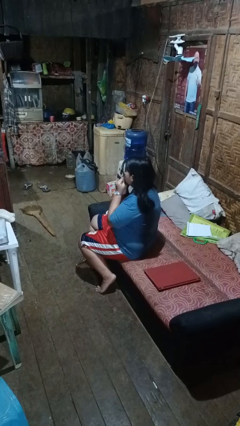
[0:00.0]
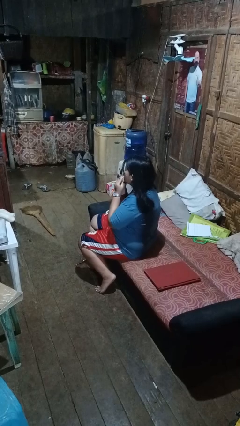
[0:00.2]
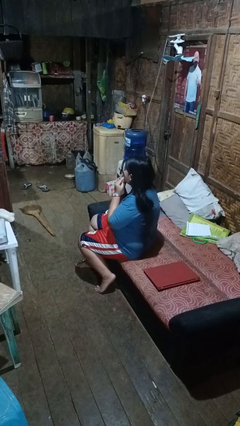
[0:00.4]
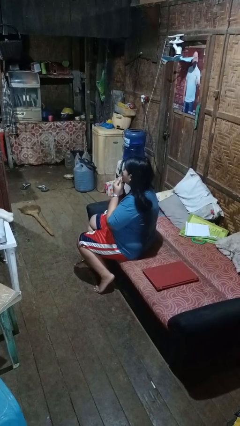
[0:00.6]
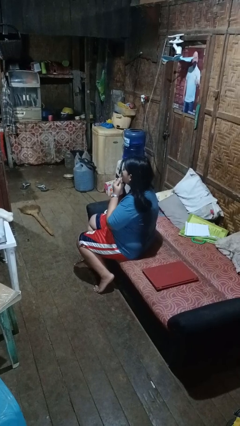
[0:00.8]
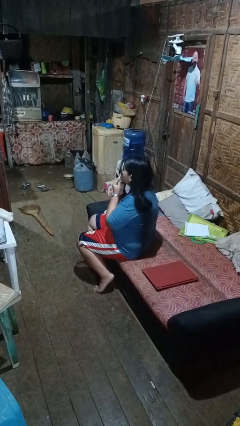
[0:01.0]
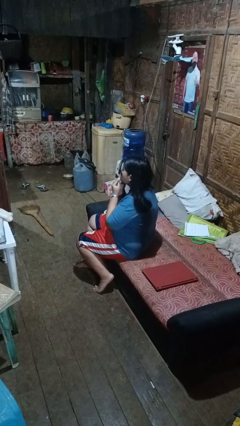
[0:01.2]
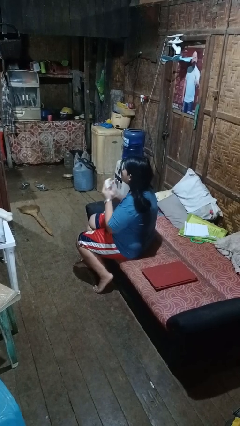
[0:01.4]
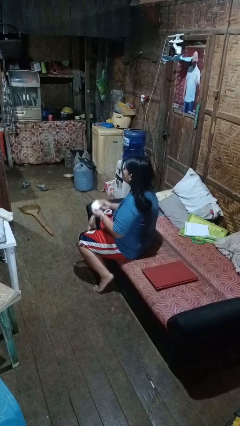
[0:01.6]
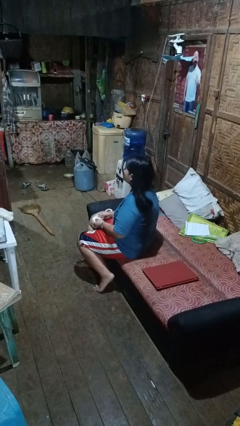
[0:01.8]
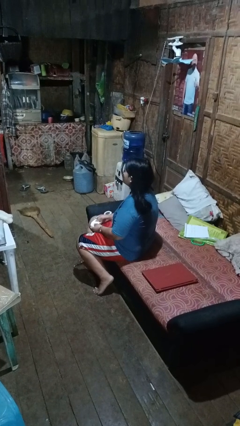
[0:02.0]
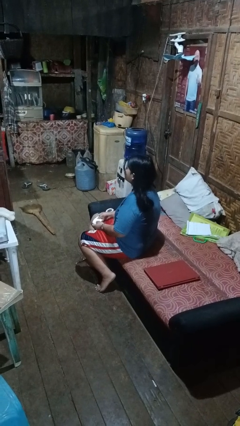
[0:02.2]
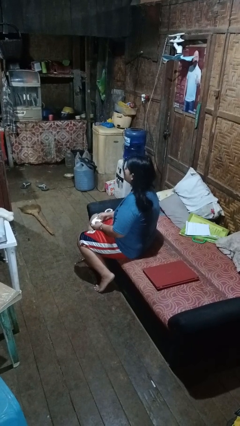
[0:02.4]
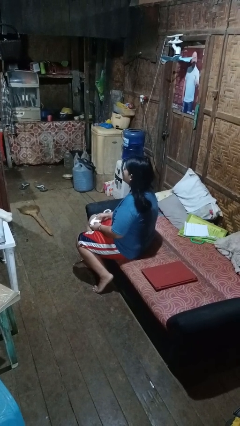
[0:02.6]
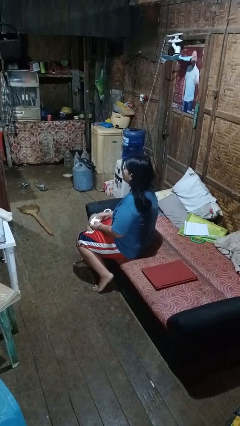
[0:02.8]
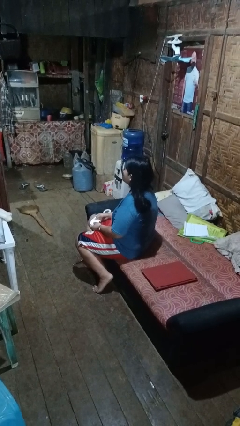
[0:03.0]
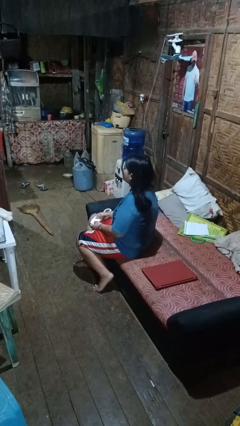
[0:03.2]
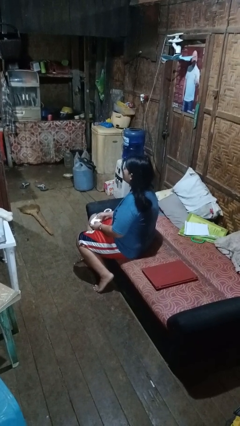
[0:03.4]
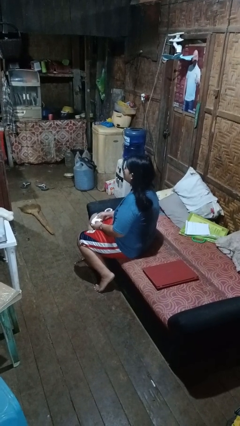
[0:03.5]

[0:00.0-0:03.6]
person wipes mouth with napkin

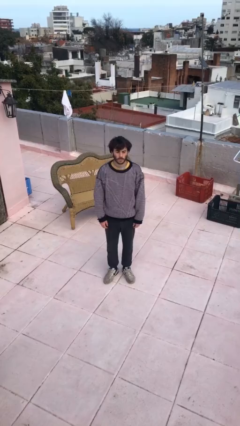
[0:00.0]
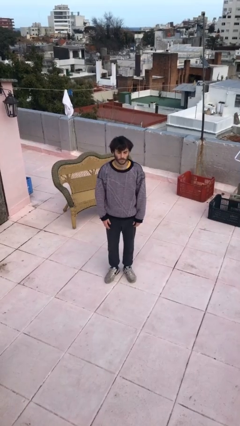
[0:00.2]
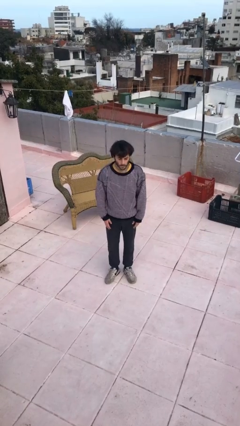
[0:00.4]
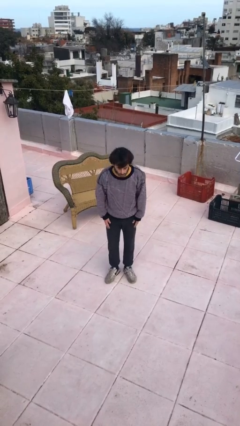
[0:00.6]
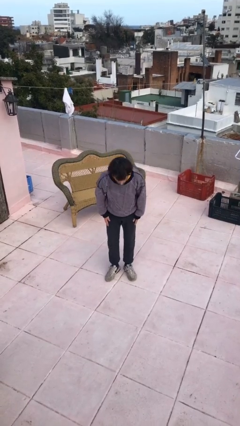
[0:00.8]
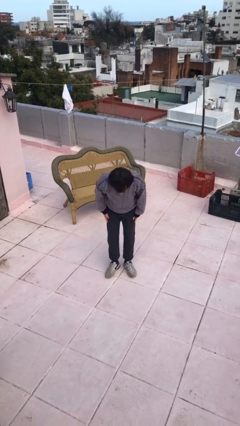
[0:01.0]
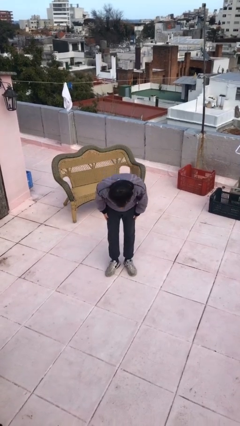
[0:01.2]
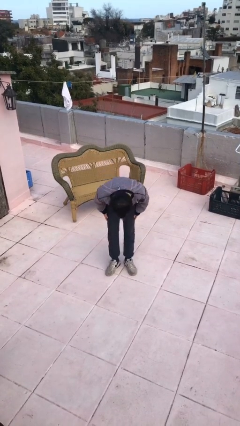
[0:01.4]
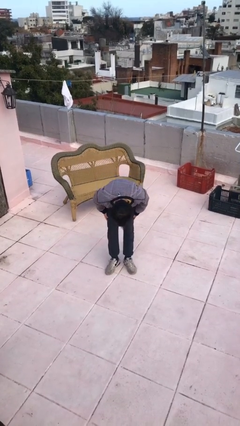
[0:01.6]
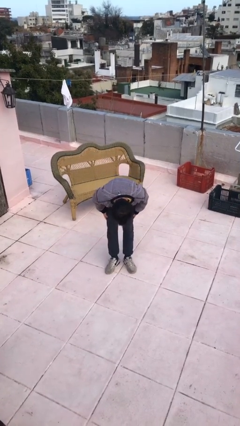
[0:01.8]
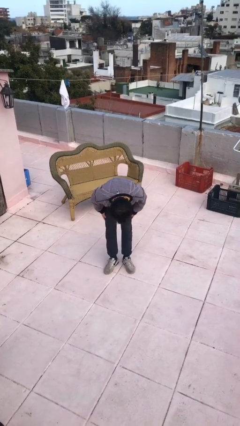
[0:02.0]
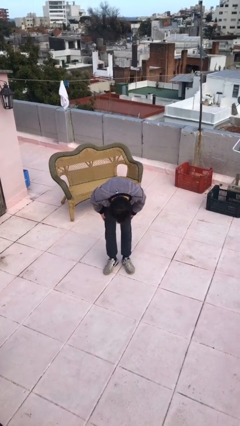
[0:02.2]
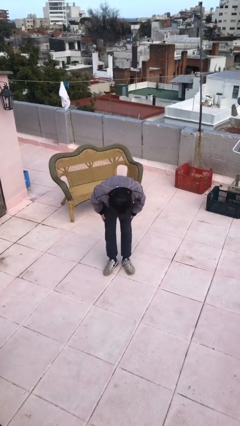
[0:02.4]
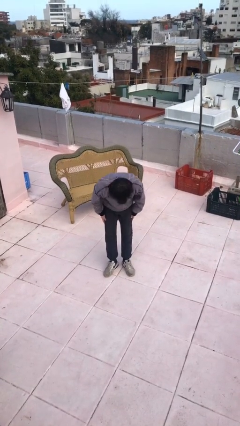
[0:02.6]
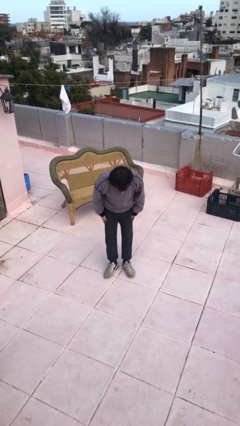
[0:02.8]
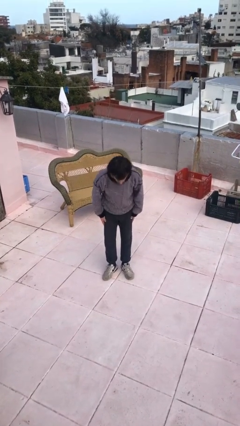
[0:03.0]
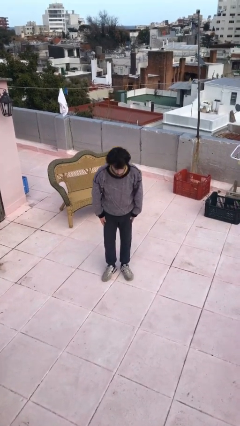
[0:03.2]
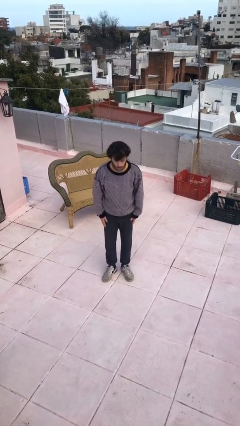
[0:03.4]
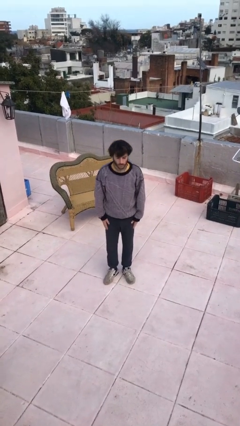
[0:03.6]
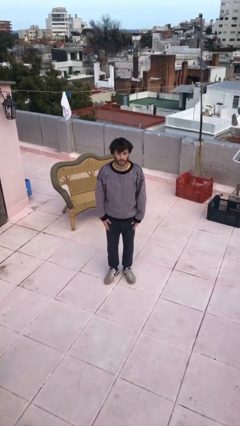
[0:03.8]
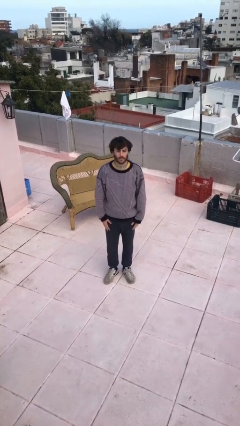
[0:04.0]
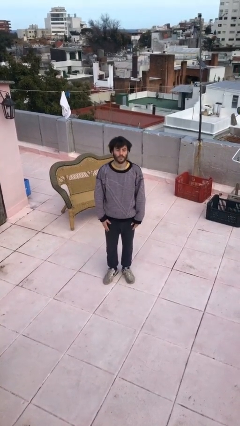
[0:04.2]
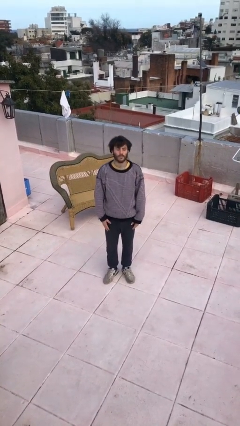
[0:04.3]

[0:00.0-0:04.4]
person bows

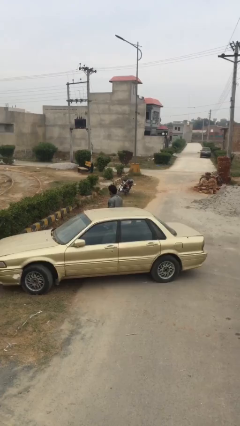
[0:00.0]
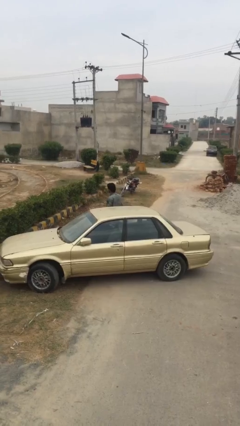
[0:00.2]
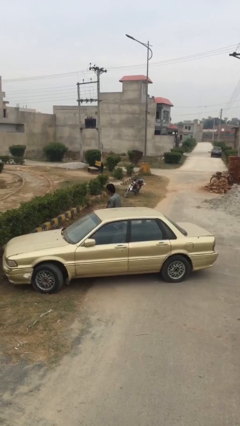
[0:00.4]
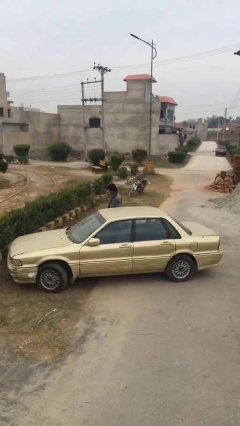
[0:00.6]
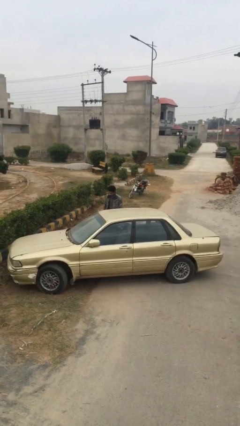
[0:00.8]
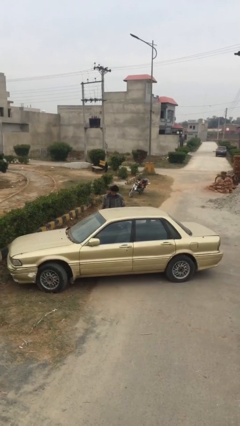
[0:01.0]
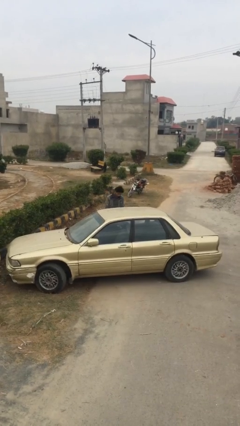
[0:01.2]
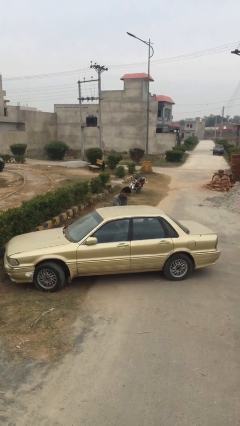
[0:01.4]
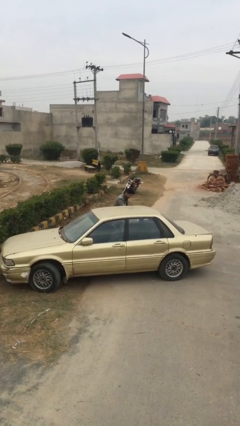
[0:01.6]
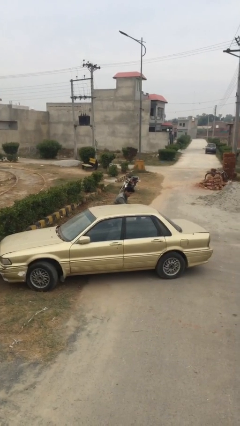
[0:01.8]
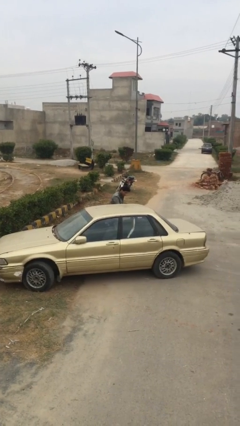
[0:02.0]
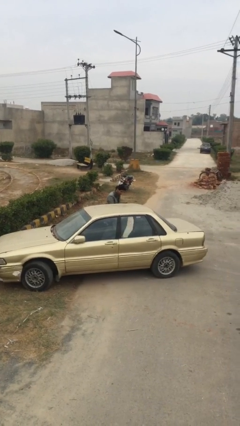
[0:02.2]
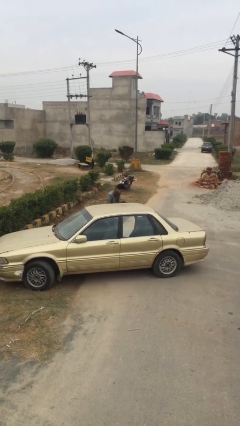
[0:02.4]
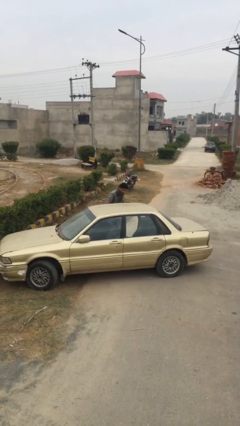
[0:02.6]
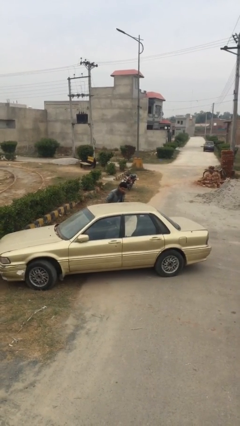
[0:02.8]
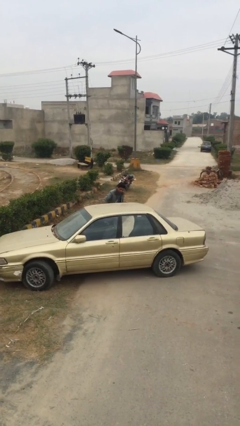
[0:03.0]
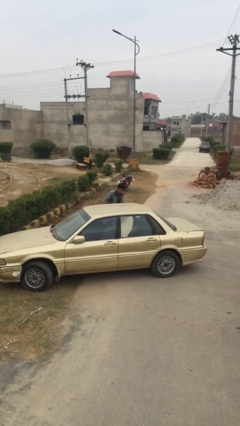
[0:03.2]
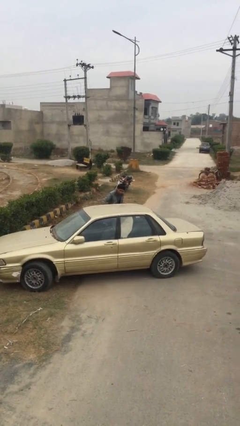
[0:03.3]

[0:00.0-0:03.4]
person opens car door

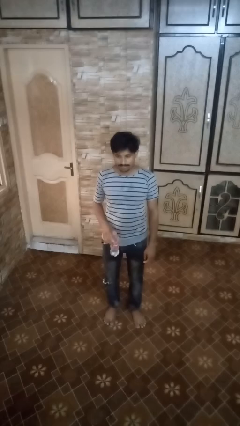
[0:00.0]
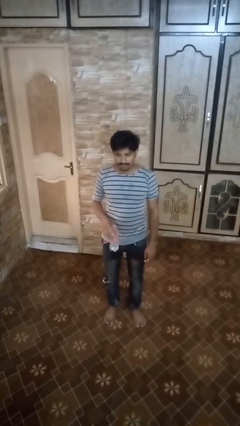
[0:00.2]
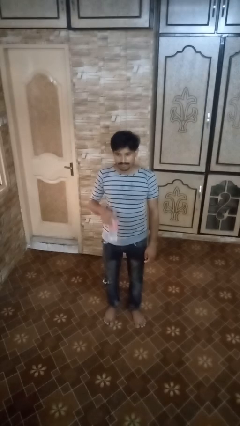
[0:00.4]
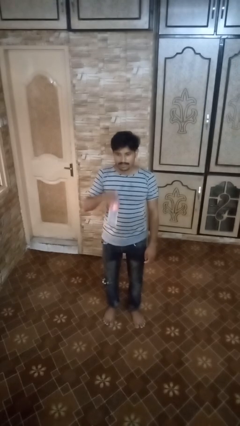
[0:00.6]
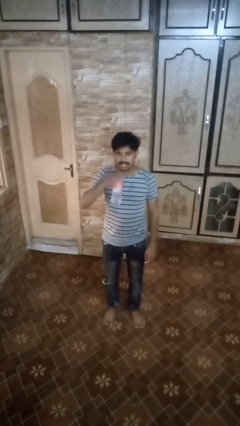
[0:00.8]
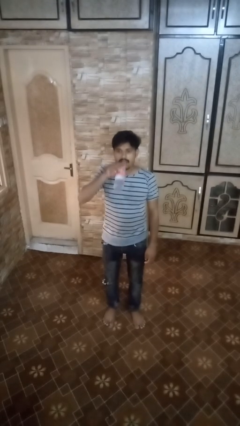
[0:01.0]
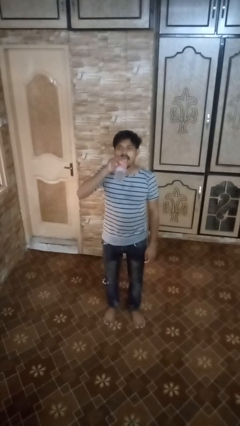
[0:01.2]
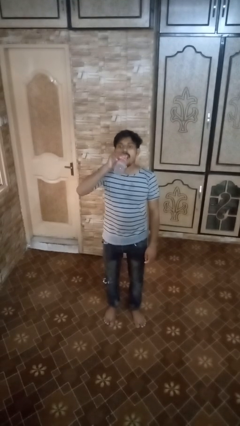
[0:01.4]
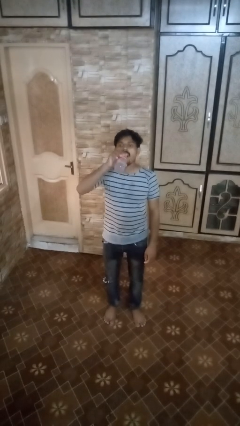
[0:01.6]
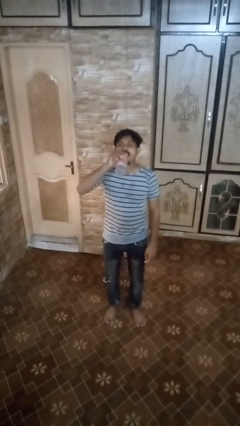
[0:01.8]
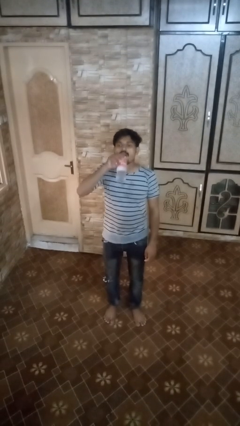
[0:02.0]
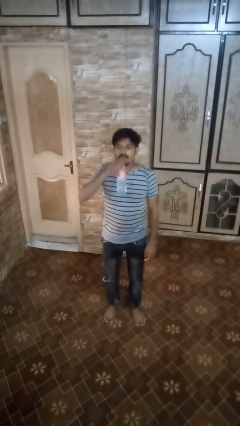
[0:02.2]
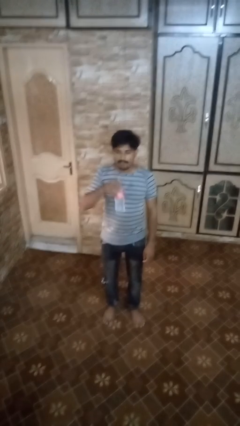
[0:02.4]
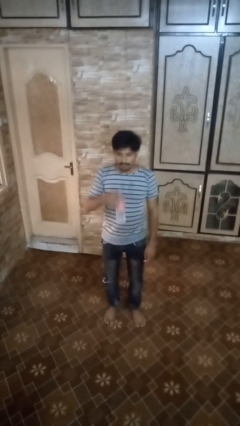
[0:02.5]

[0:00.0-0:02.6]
person drinks from bottle

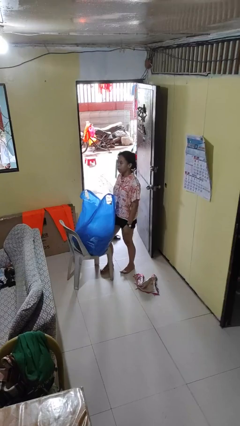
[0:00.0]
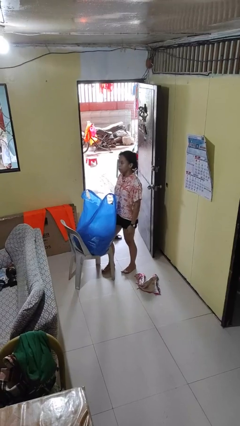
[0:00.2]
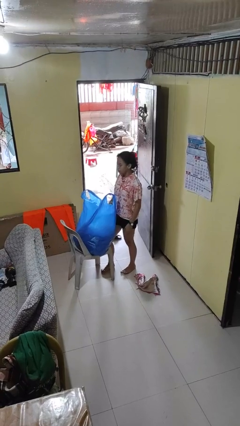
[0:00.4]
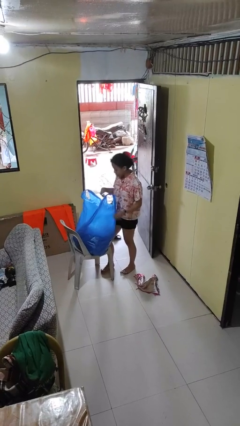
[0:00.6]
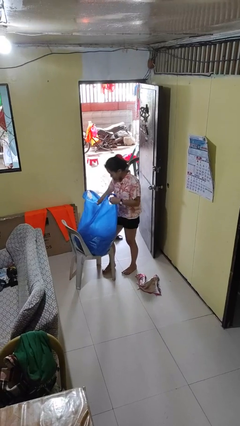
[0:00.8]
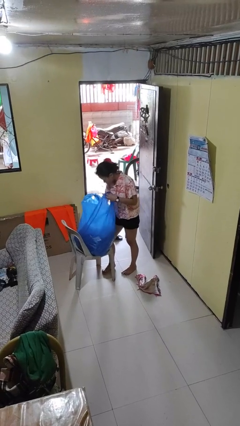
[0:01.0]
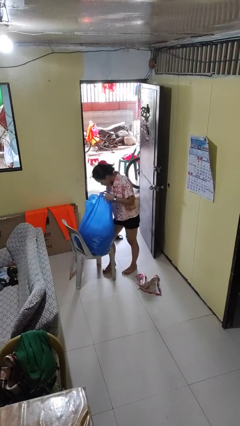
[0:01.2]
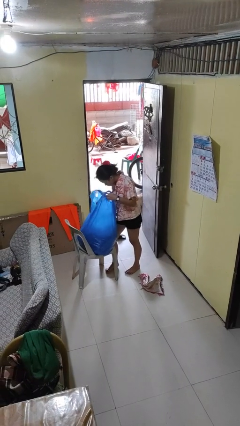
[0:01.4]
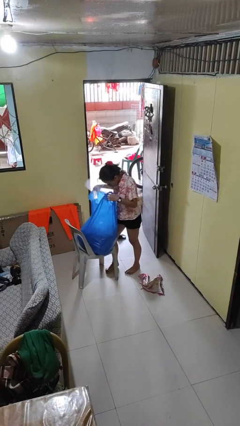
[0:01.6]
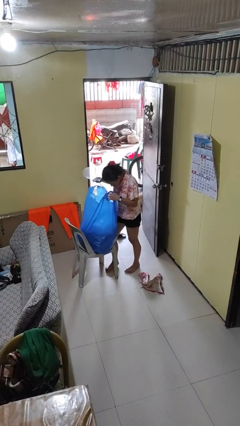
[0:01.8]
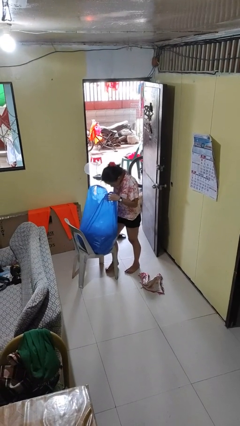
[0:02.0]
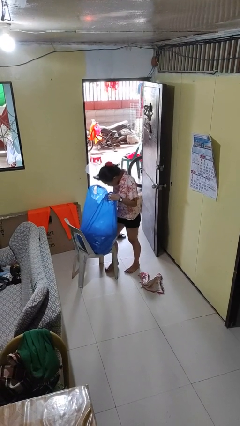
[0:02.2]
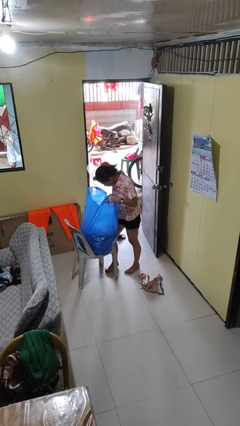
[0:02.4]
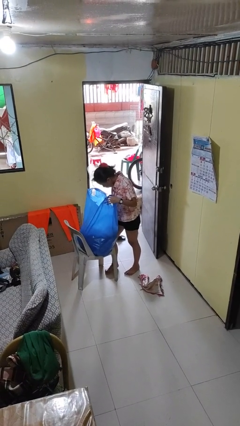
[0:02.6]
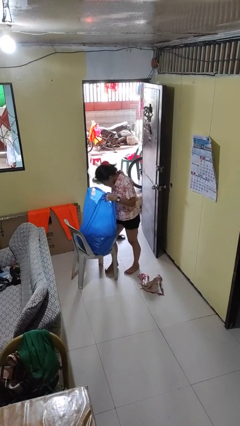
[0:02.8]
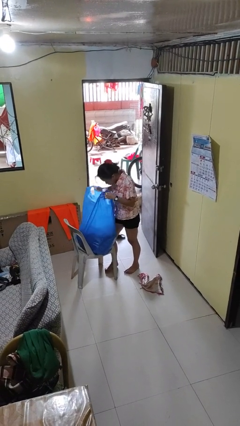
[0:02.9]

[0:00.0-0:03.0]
person searches in bag

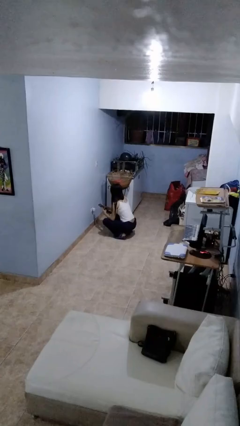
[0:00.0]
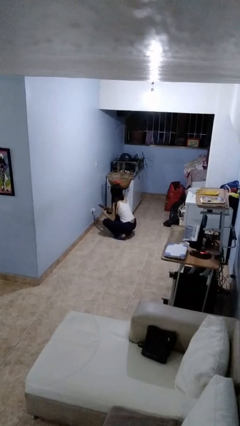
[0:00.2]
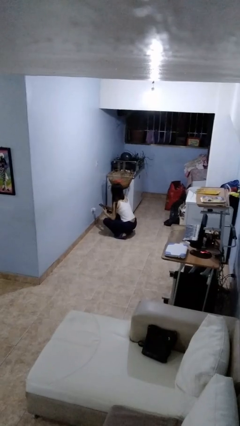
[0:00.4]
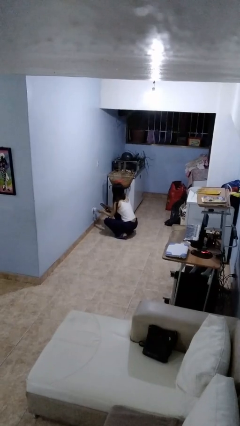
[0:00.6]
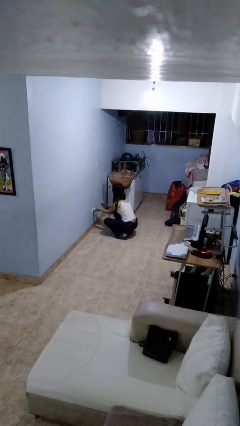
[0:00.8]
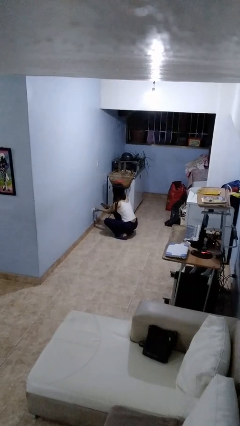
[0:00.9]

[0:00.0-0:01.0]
person unplugs from electrical socket
